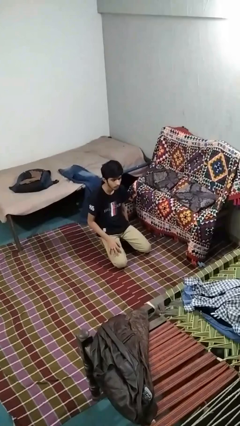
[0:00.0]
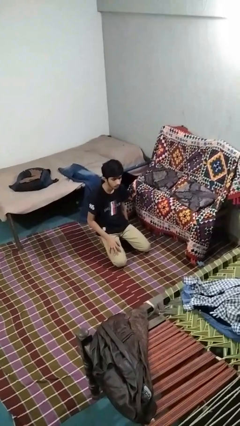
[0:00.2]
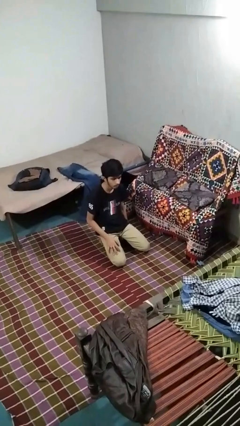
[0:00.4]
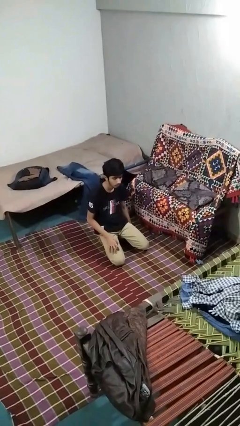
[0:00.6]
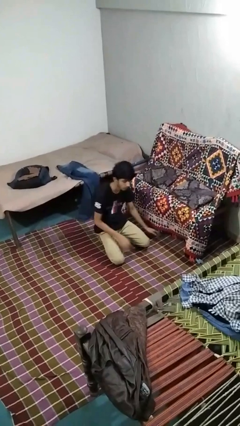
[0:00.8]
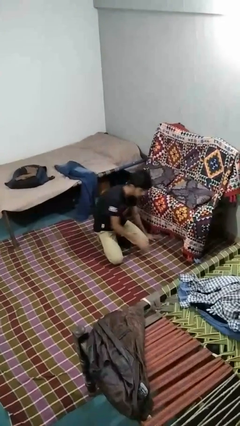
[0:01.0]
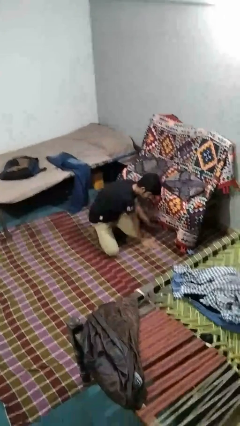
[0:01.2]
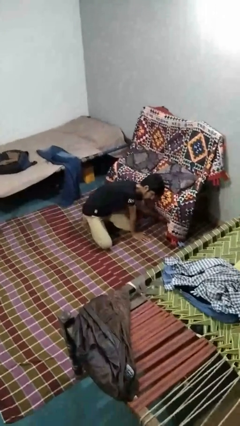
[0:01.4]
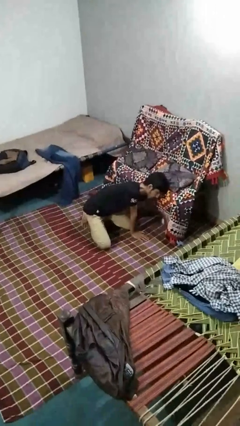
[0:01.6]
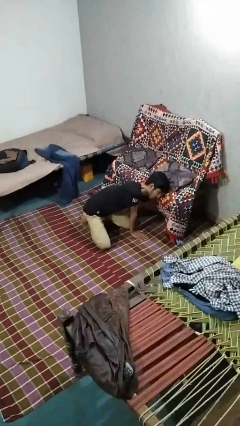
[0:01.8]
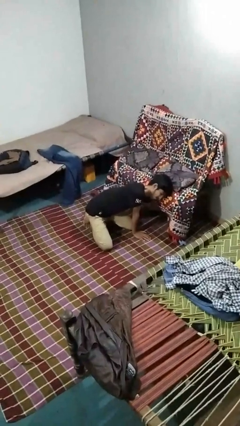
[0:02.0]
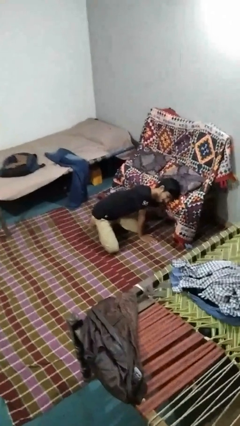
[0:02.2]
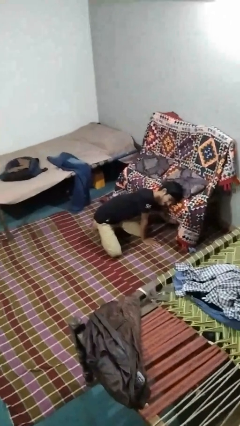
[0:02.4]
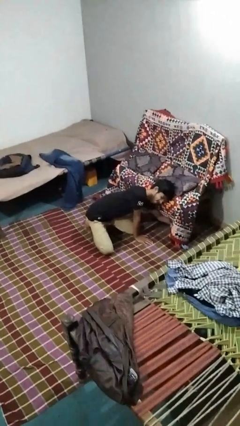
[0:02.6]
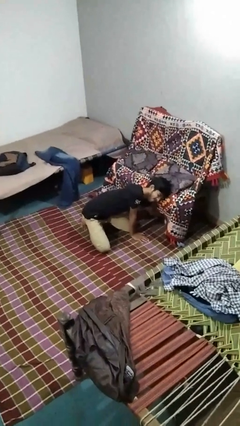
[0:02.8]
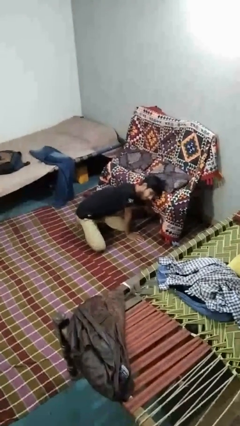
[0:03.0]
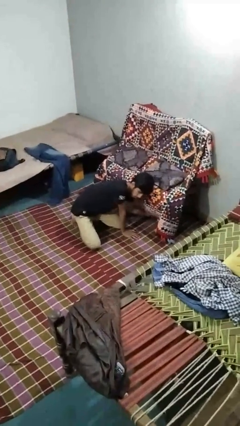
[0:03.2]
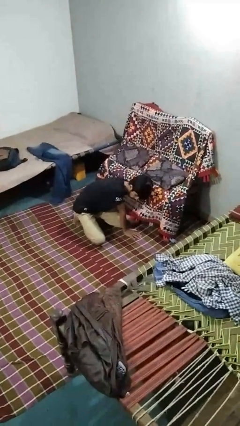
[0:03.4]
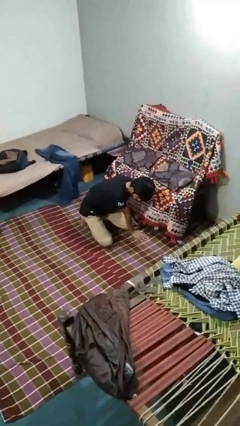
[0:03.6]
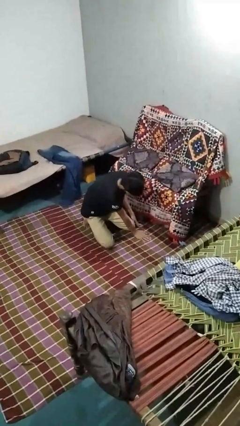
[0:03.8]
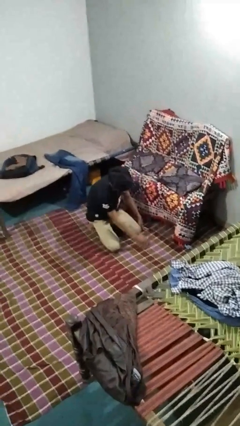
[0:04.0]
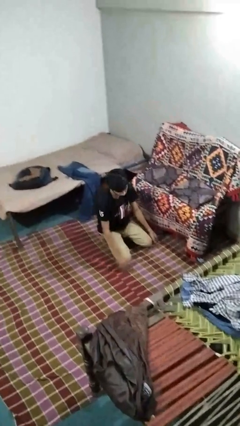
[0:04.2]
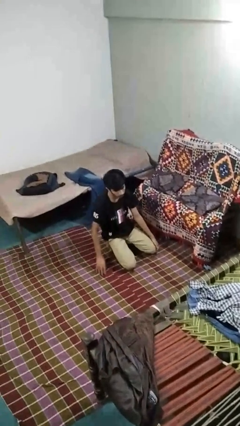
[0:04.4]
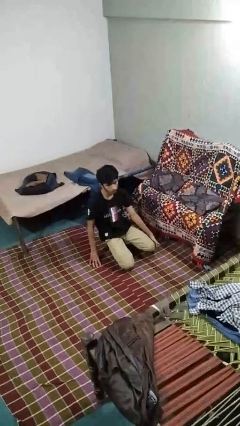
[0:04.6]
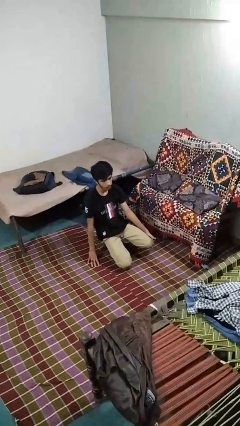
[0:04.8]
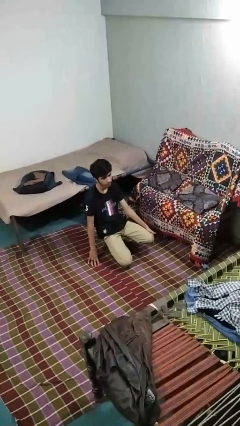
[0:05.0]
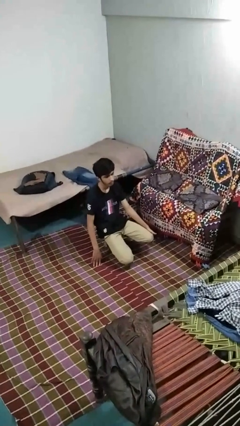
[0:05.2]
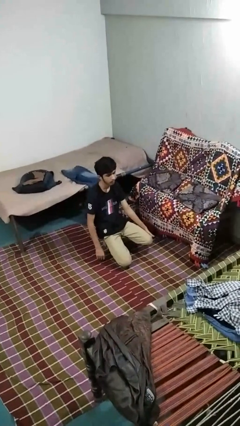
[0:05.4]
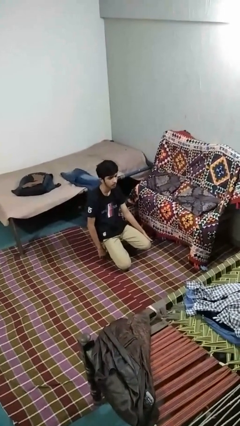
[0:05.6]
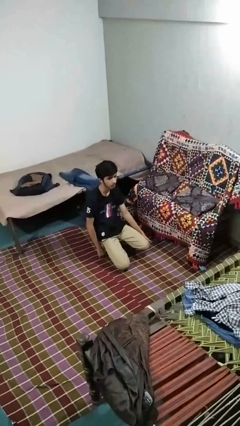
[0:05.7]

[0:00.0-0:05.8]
person searches under couch

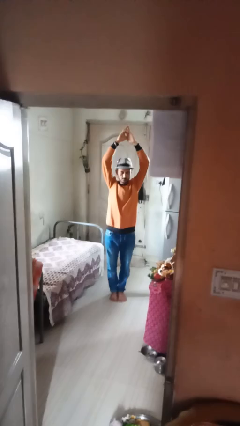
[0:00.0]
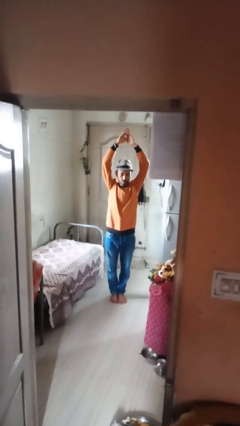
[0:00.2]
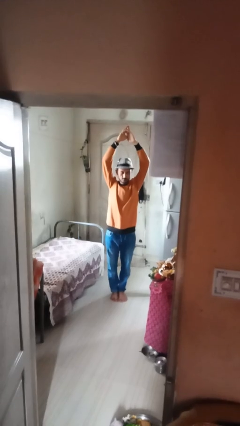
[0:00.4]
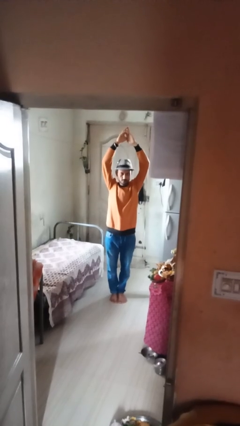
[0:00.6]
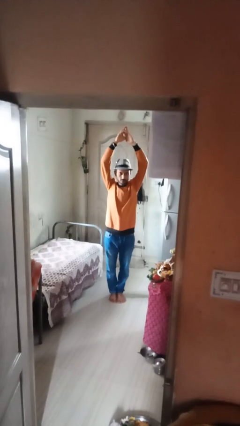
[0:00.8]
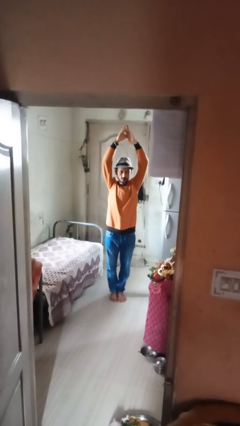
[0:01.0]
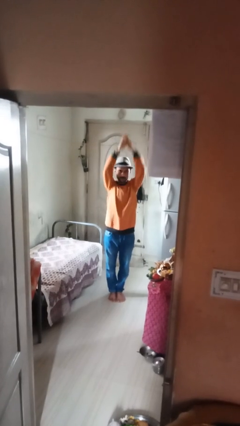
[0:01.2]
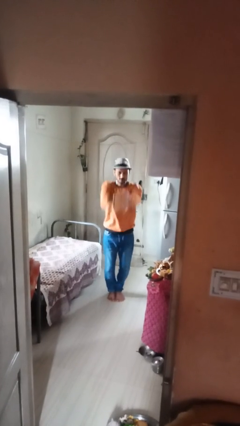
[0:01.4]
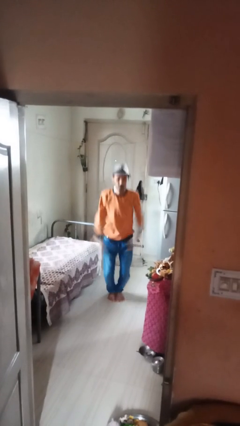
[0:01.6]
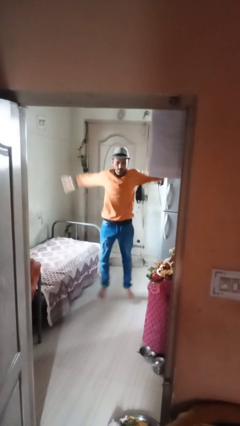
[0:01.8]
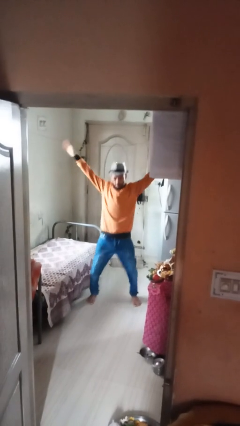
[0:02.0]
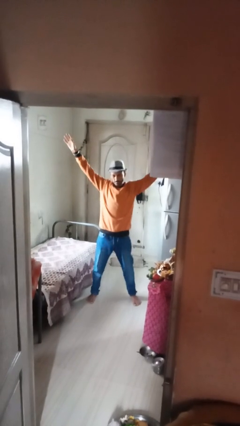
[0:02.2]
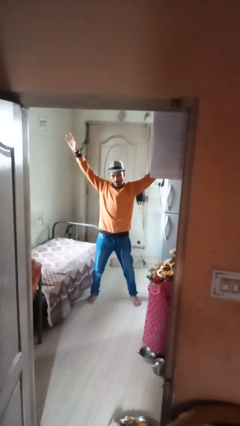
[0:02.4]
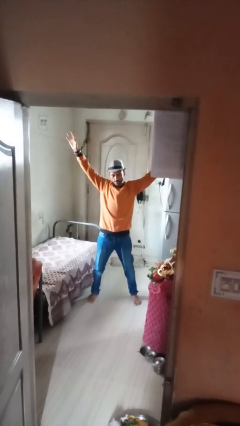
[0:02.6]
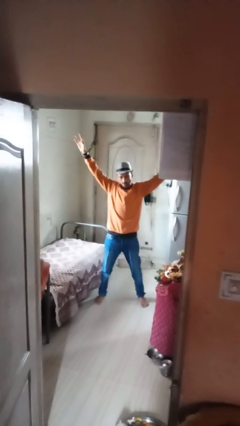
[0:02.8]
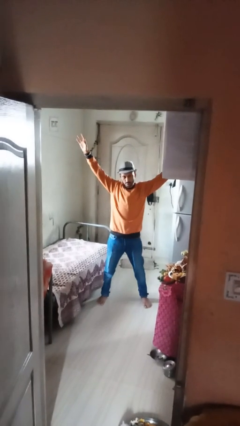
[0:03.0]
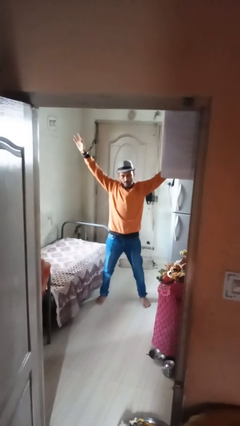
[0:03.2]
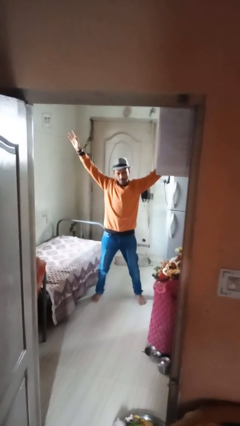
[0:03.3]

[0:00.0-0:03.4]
person exercises with jumping jacks

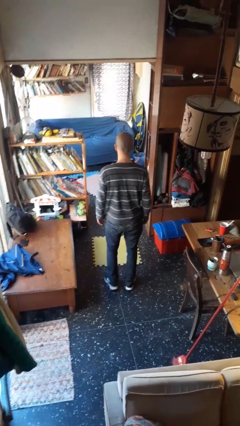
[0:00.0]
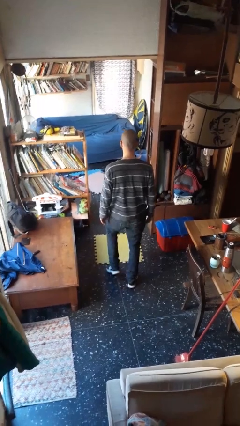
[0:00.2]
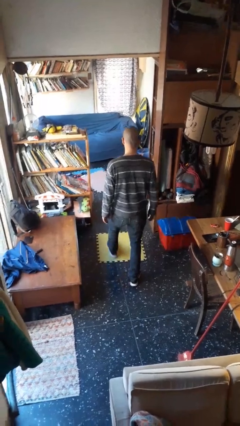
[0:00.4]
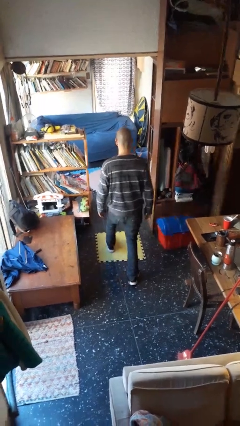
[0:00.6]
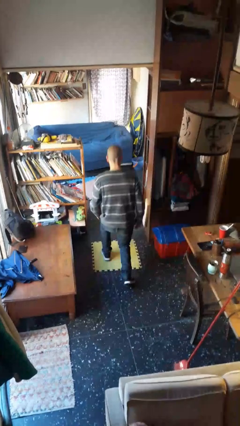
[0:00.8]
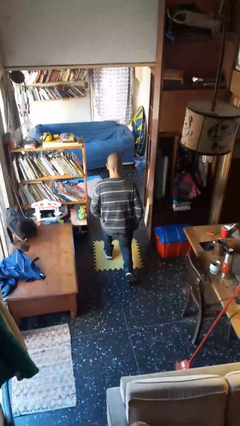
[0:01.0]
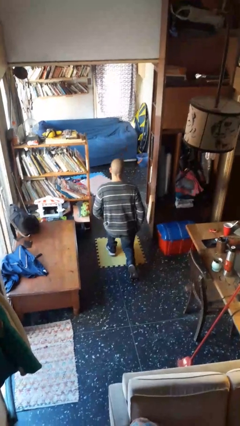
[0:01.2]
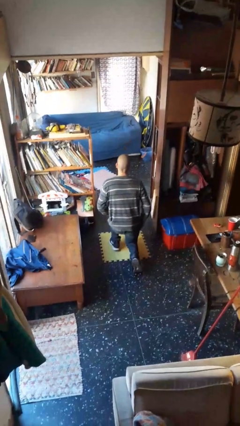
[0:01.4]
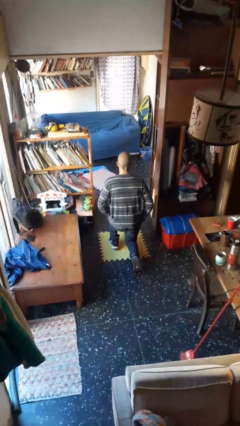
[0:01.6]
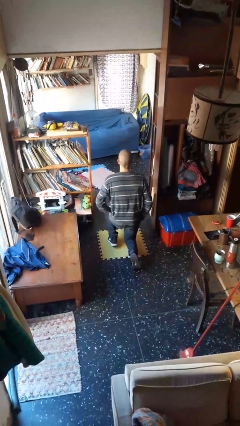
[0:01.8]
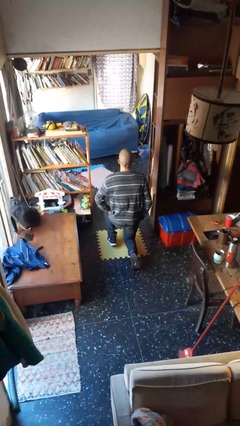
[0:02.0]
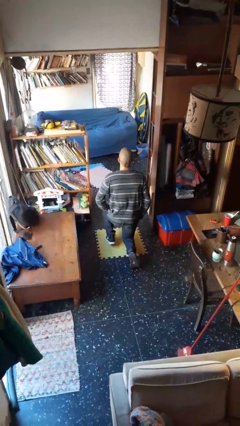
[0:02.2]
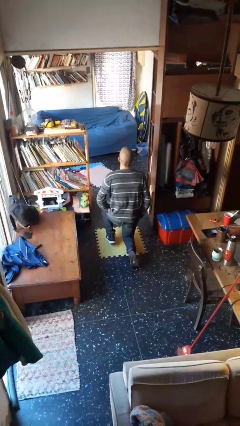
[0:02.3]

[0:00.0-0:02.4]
person kneels

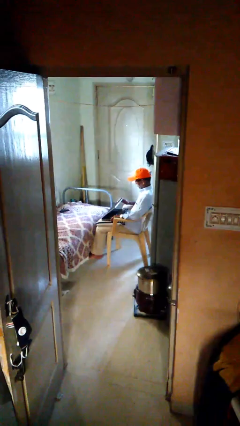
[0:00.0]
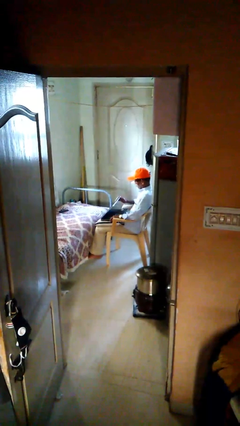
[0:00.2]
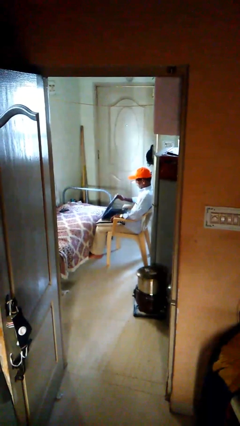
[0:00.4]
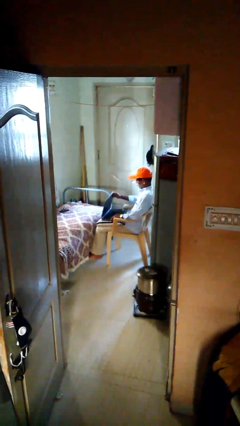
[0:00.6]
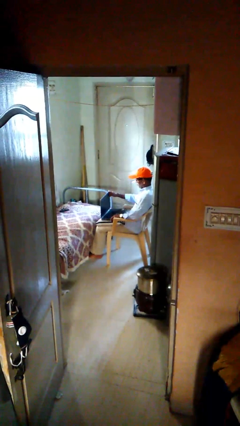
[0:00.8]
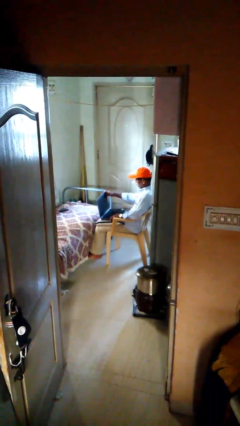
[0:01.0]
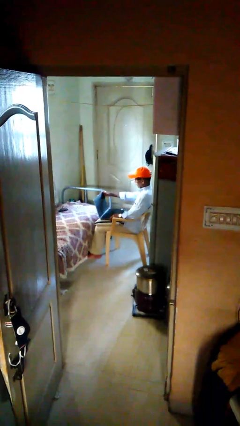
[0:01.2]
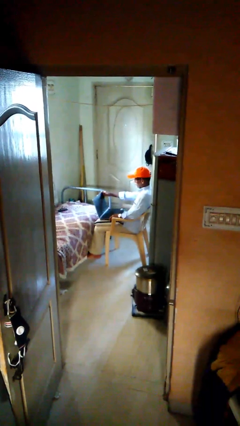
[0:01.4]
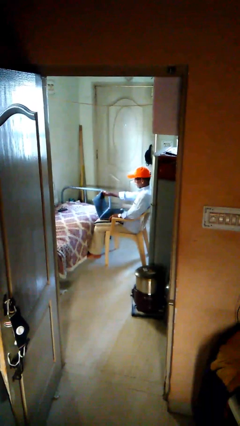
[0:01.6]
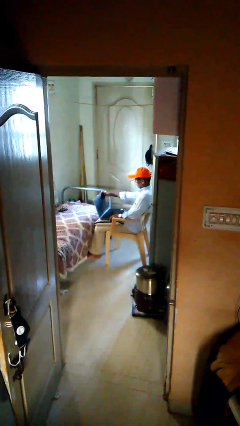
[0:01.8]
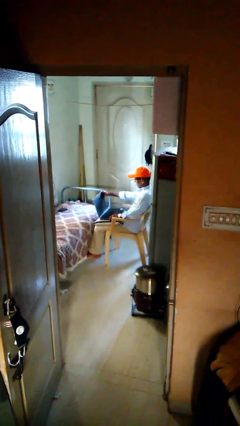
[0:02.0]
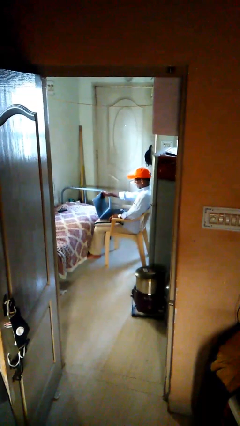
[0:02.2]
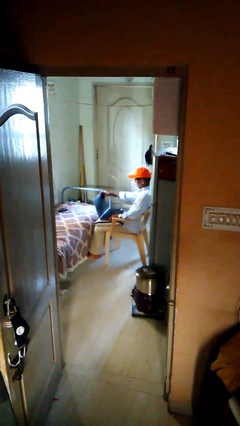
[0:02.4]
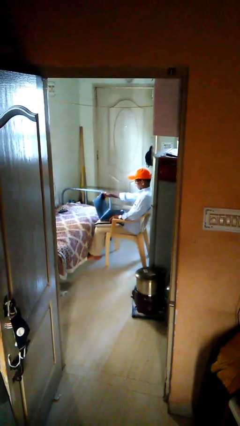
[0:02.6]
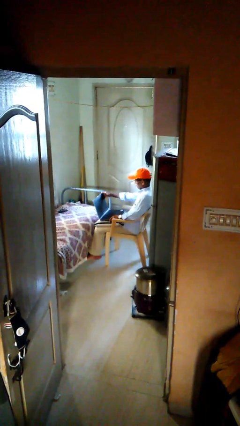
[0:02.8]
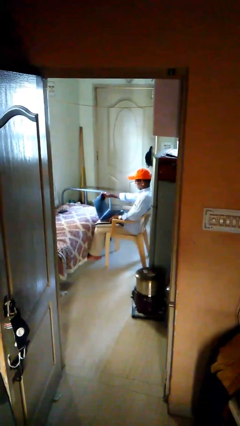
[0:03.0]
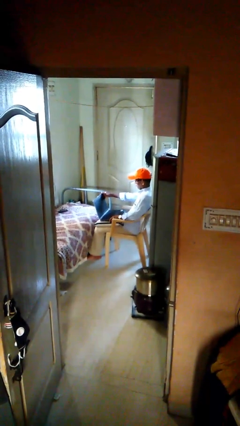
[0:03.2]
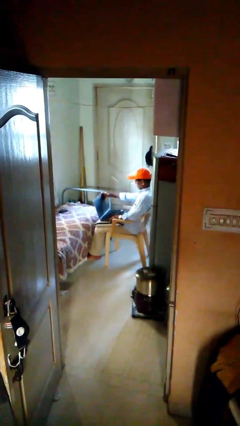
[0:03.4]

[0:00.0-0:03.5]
person interacts with laptop

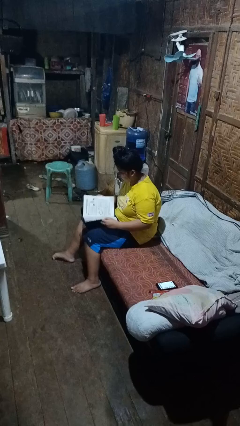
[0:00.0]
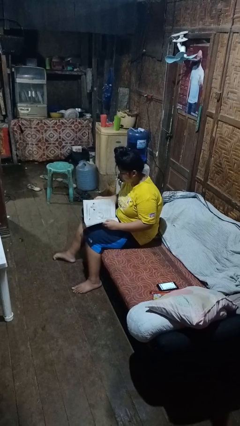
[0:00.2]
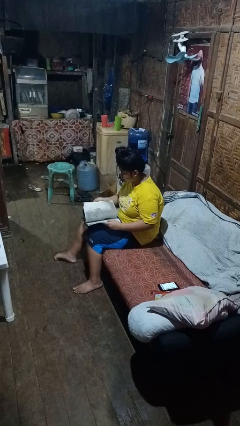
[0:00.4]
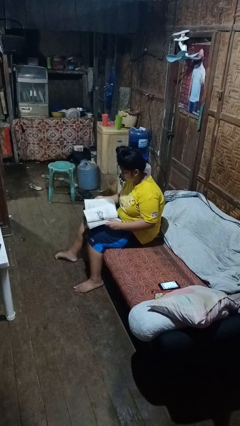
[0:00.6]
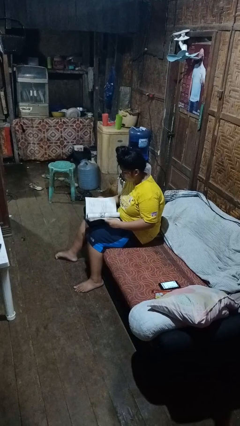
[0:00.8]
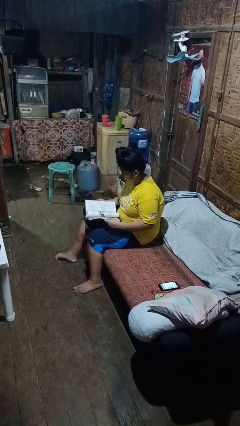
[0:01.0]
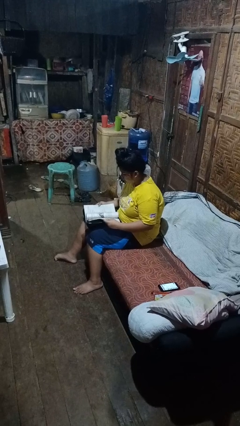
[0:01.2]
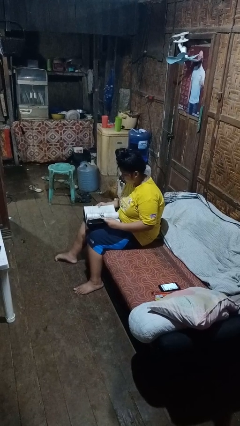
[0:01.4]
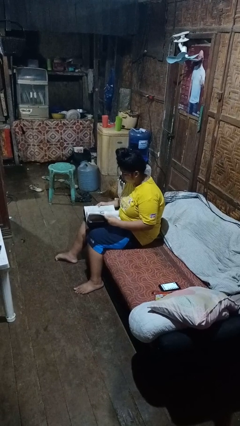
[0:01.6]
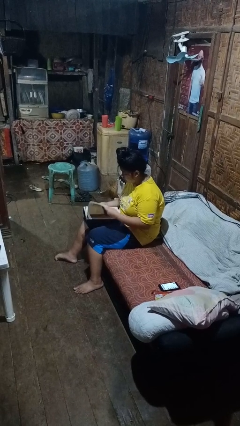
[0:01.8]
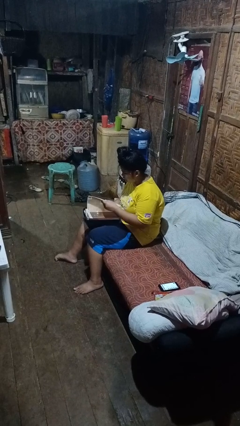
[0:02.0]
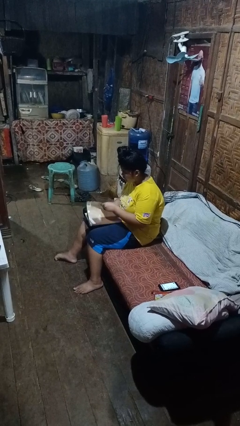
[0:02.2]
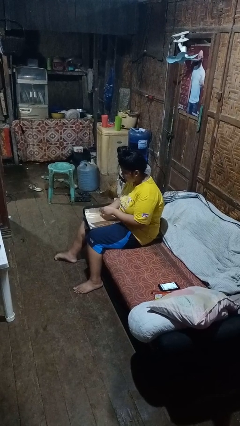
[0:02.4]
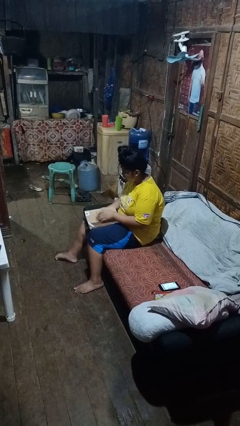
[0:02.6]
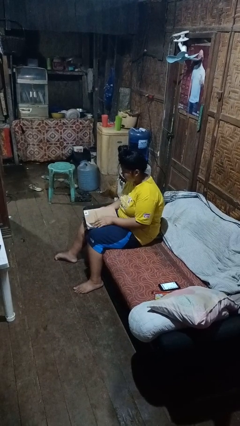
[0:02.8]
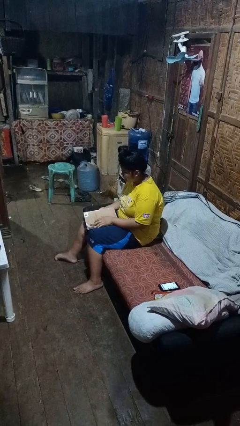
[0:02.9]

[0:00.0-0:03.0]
person reads book
